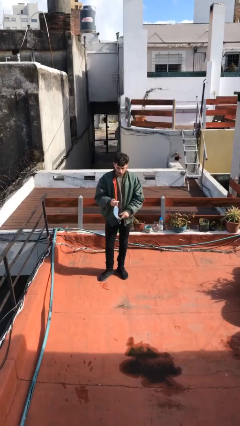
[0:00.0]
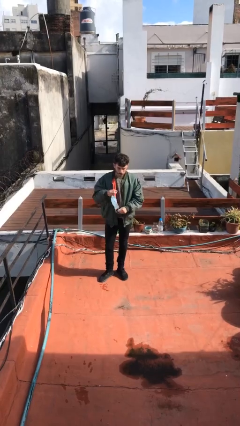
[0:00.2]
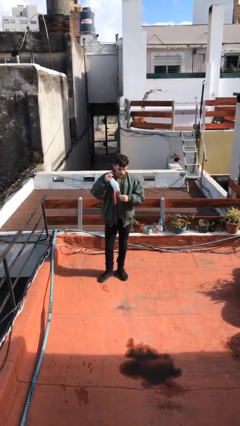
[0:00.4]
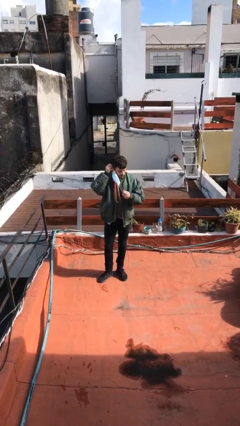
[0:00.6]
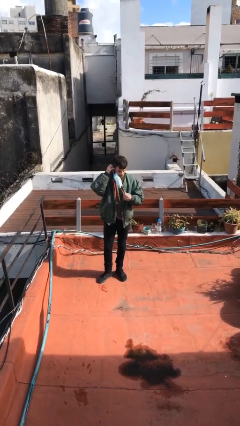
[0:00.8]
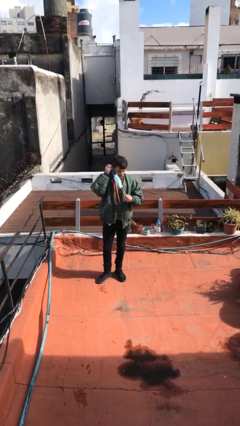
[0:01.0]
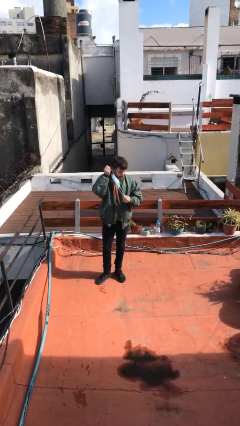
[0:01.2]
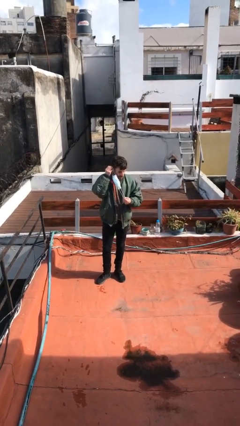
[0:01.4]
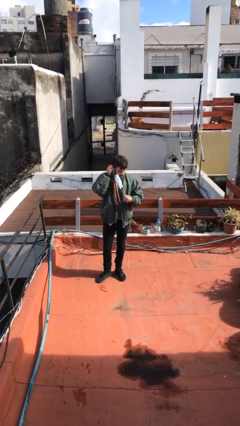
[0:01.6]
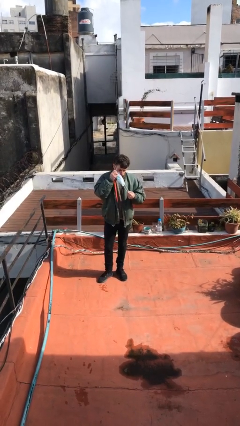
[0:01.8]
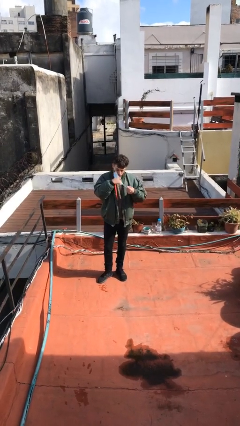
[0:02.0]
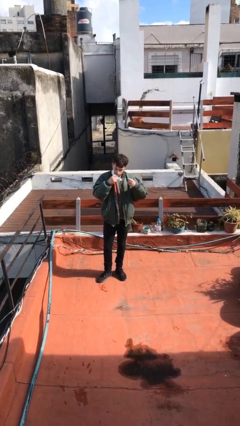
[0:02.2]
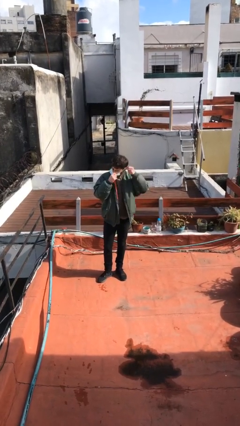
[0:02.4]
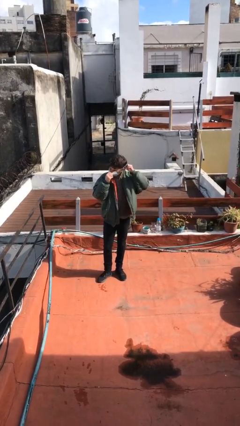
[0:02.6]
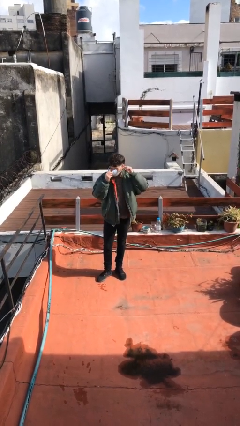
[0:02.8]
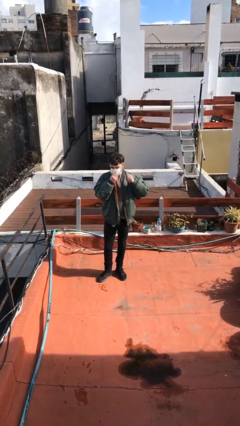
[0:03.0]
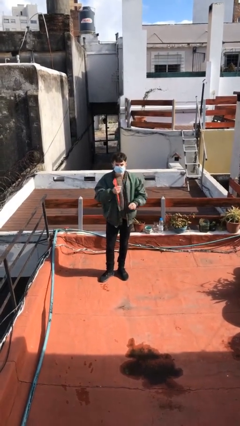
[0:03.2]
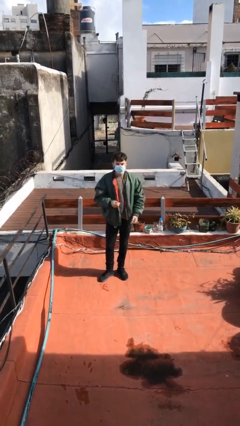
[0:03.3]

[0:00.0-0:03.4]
person puts on facemask

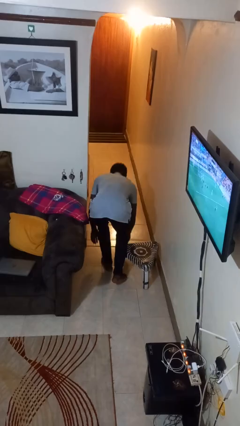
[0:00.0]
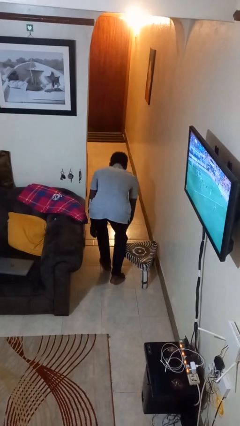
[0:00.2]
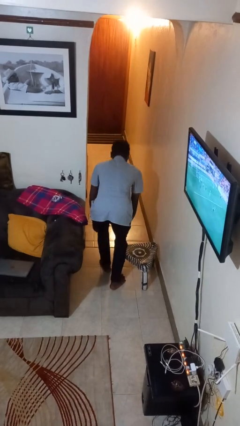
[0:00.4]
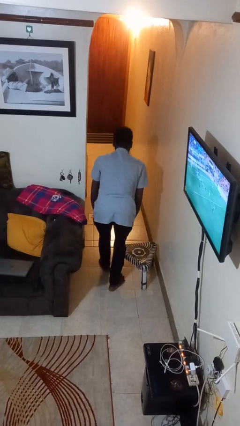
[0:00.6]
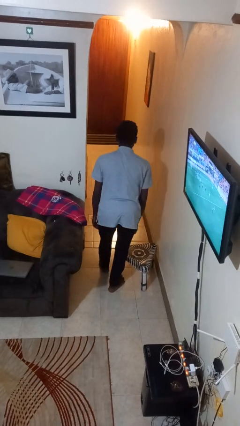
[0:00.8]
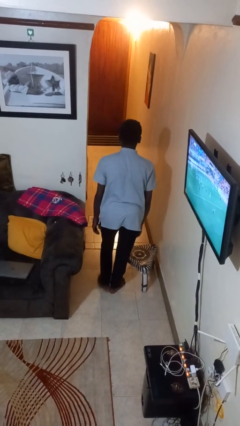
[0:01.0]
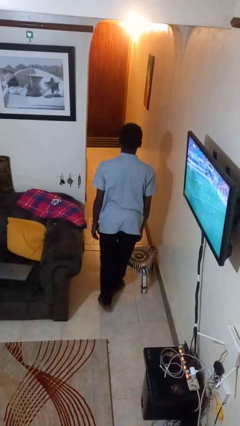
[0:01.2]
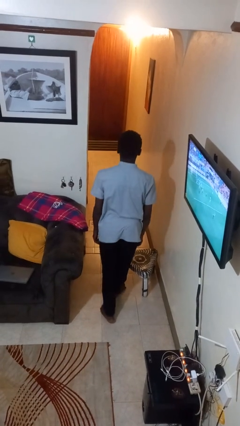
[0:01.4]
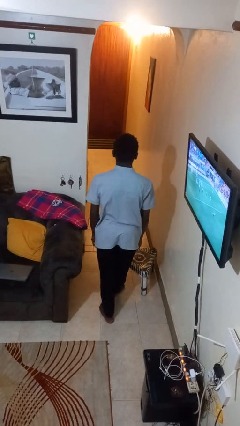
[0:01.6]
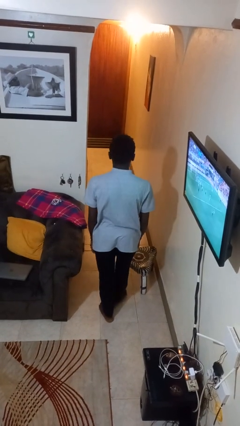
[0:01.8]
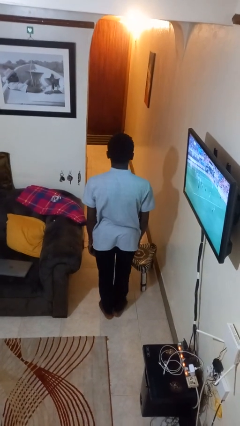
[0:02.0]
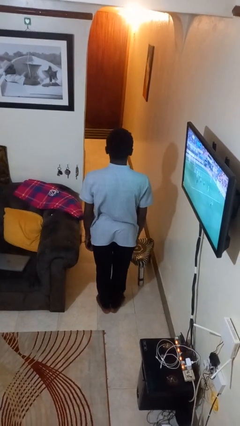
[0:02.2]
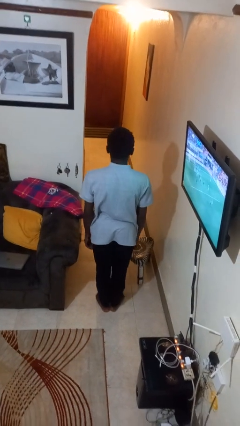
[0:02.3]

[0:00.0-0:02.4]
person stands up from floor

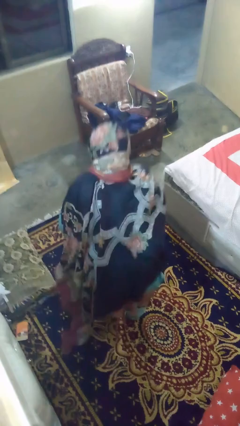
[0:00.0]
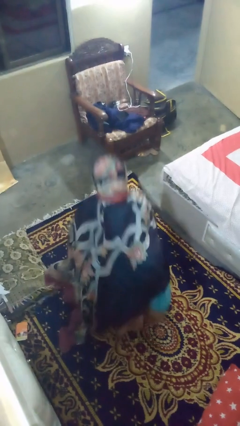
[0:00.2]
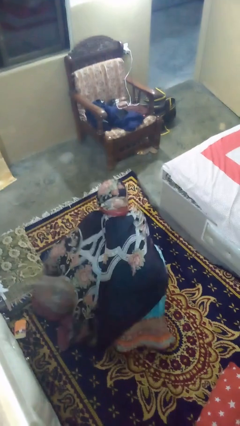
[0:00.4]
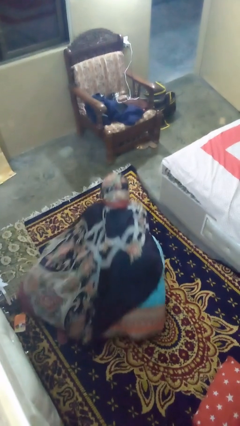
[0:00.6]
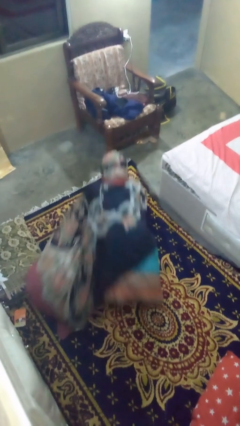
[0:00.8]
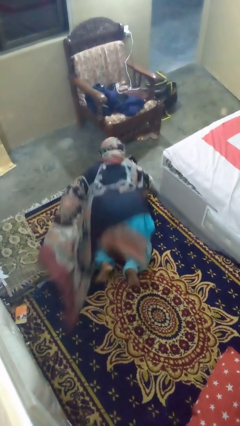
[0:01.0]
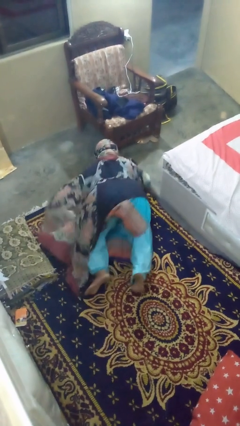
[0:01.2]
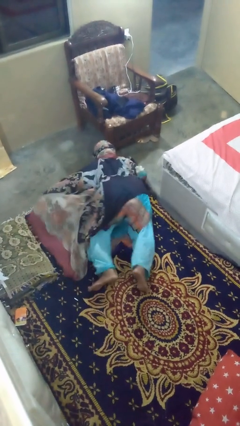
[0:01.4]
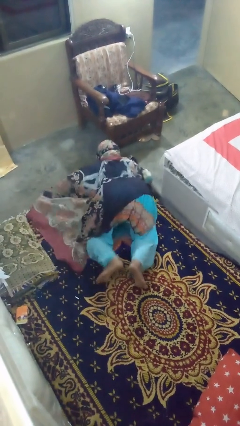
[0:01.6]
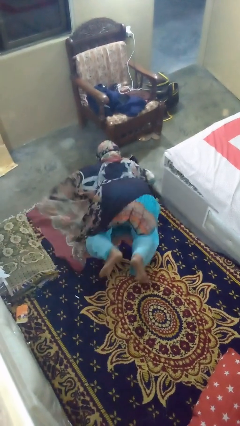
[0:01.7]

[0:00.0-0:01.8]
person exercises with pushup

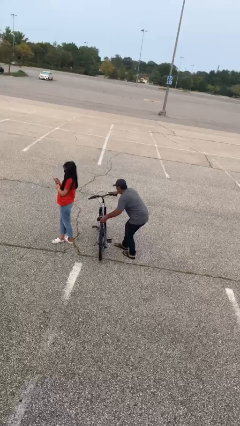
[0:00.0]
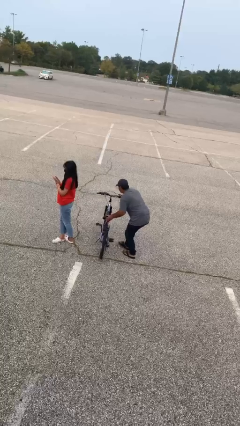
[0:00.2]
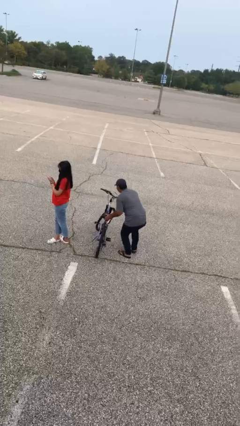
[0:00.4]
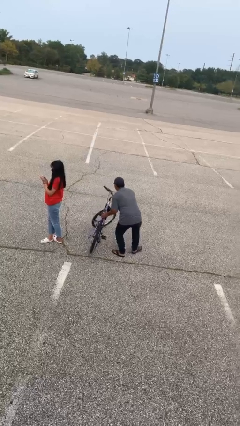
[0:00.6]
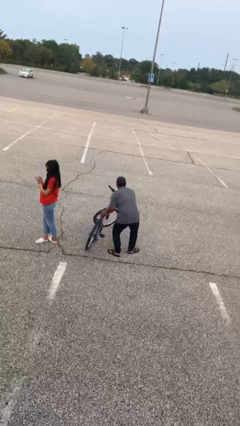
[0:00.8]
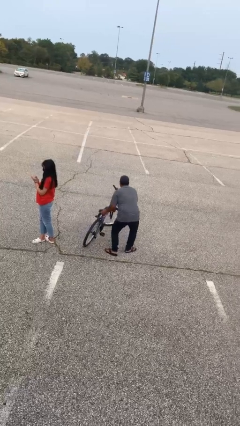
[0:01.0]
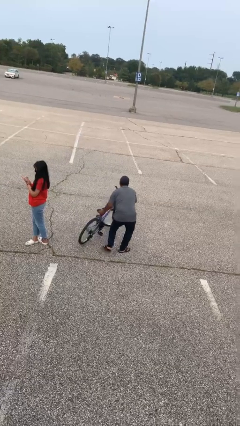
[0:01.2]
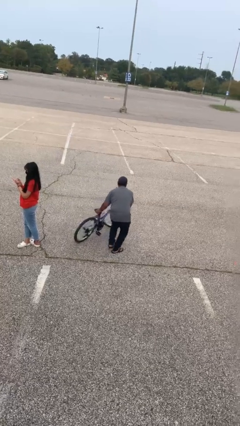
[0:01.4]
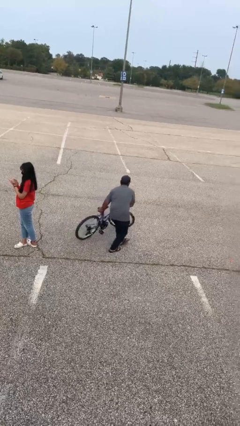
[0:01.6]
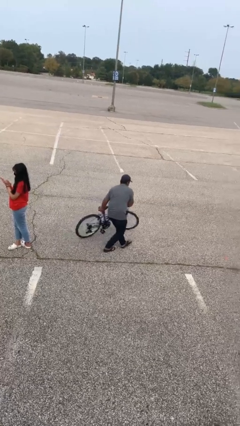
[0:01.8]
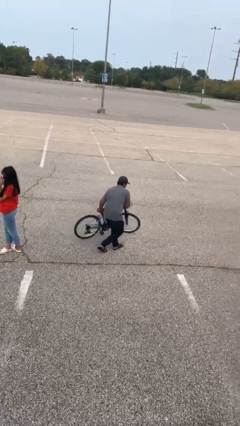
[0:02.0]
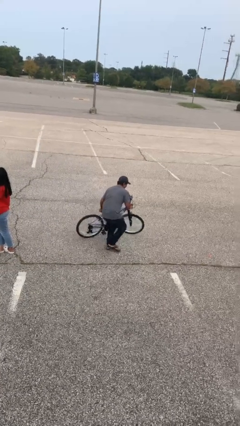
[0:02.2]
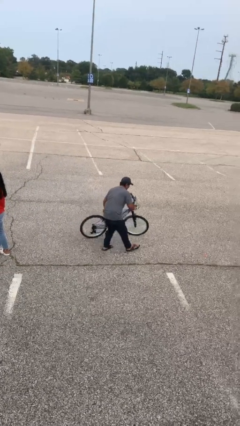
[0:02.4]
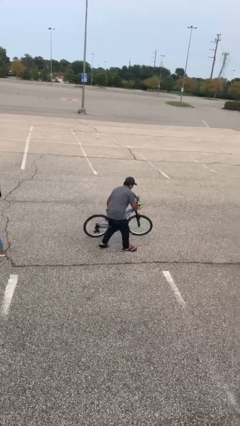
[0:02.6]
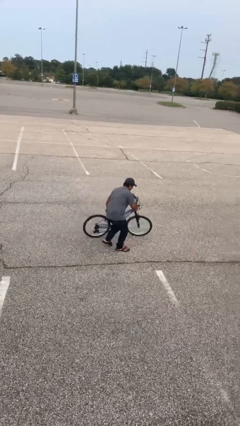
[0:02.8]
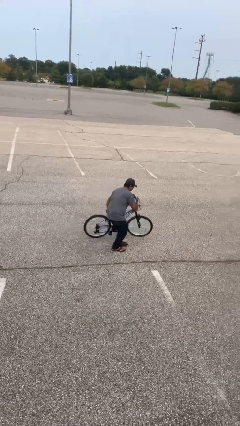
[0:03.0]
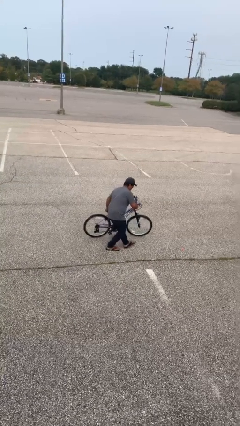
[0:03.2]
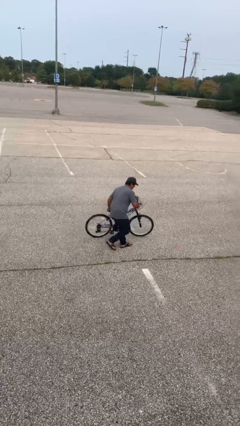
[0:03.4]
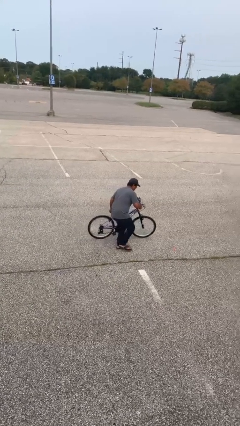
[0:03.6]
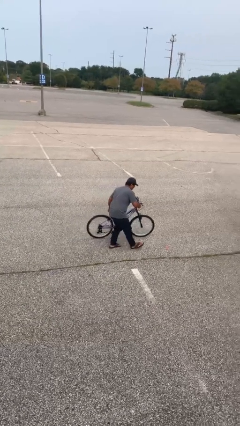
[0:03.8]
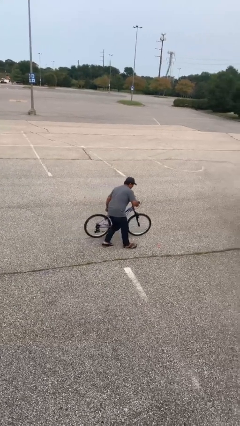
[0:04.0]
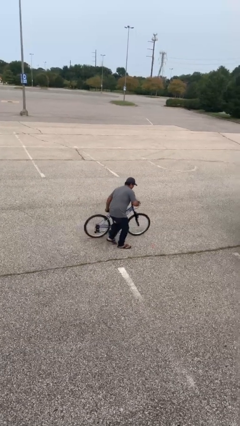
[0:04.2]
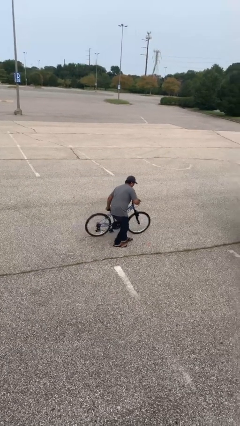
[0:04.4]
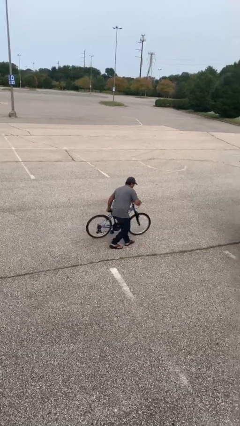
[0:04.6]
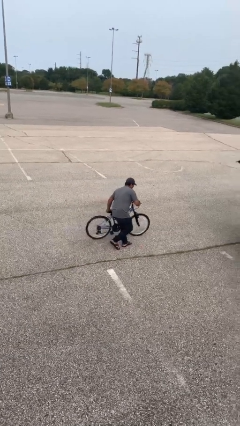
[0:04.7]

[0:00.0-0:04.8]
person steals object from person

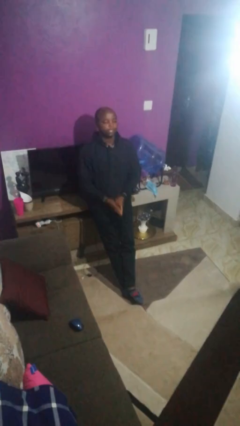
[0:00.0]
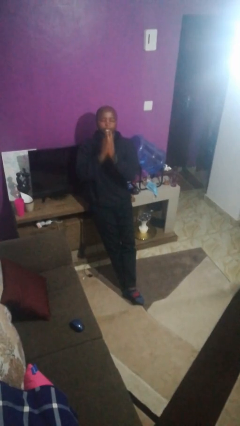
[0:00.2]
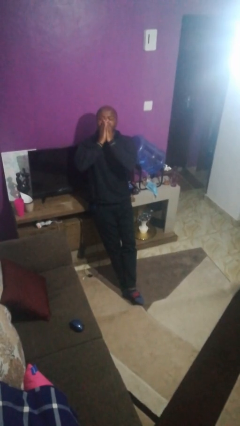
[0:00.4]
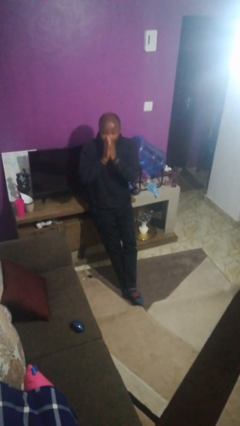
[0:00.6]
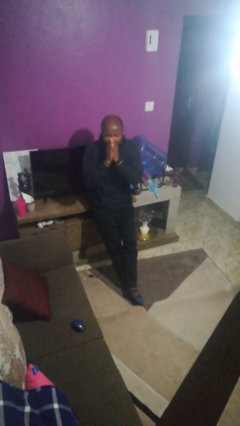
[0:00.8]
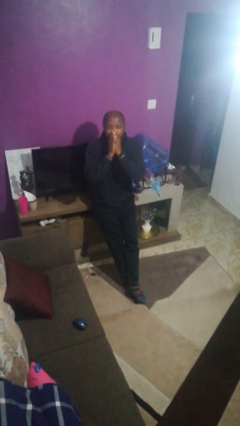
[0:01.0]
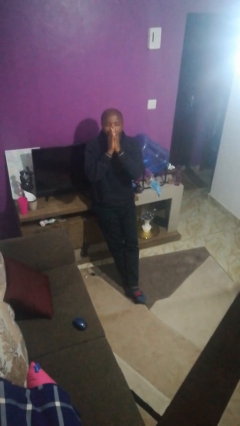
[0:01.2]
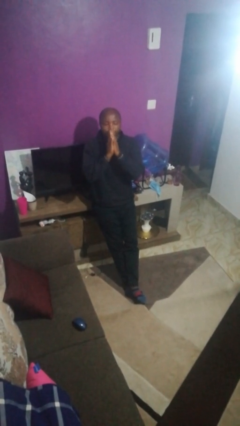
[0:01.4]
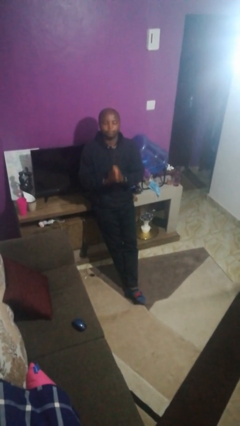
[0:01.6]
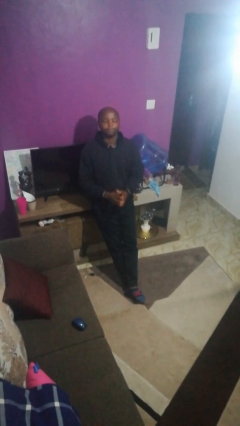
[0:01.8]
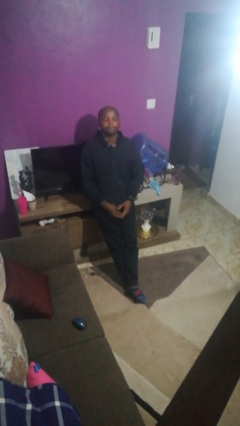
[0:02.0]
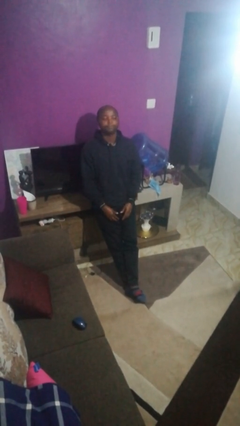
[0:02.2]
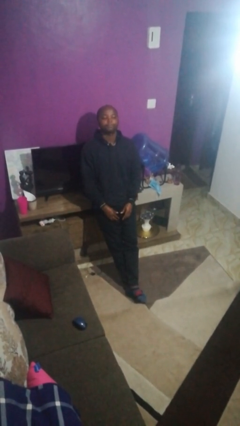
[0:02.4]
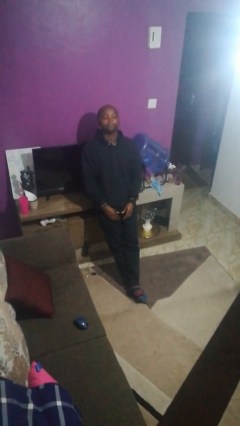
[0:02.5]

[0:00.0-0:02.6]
person sneezes into hand

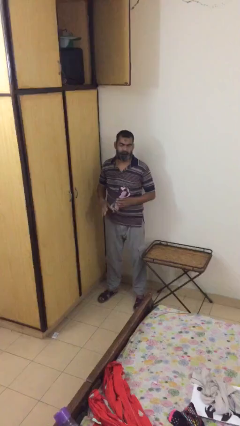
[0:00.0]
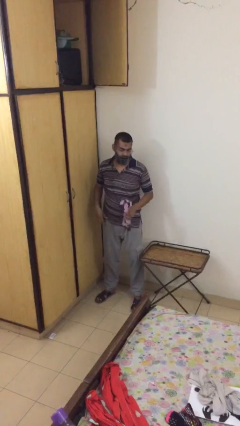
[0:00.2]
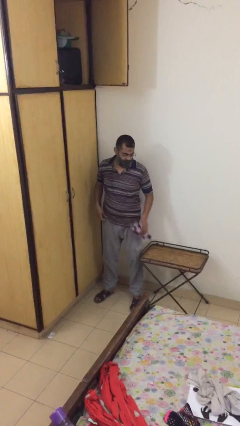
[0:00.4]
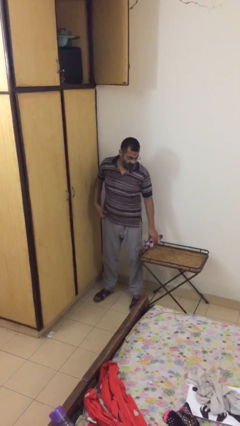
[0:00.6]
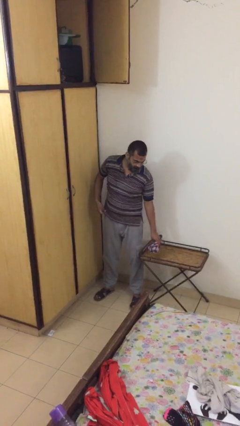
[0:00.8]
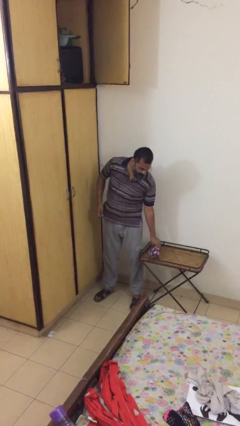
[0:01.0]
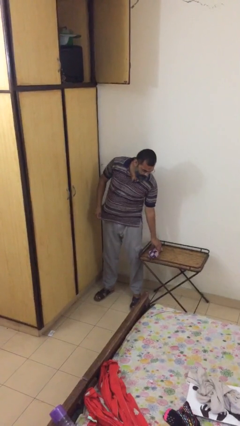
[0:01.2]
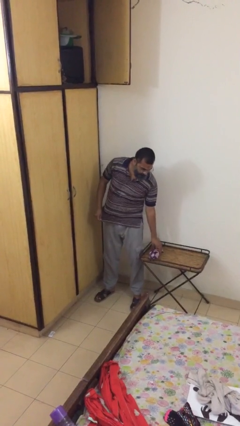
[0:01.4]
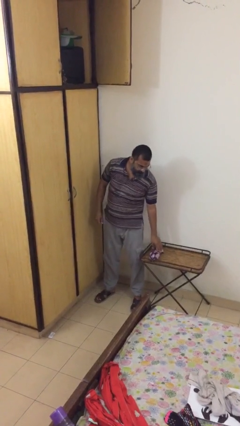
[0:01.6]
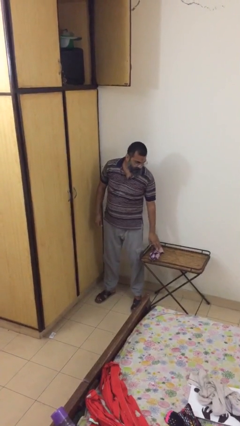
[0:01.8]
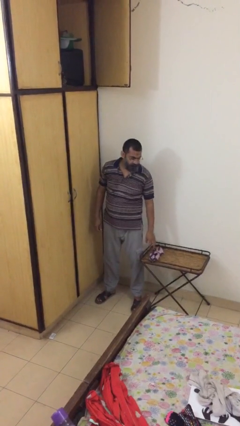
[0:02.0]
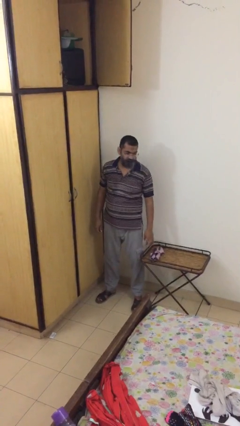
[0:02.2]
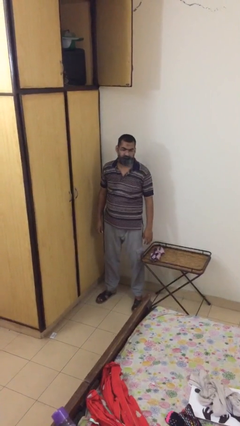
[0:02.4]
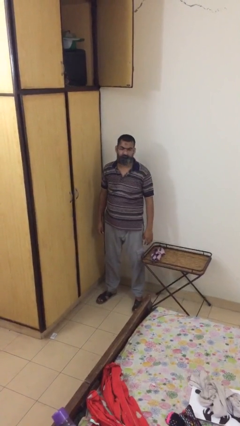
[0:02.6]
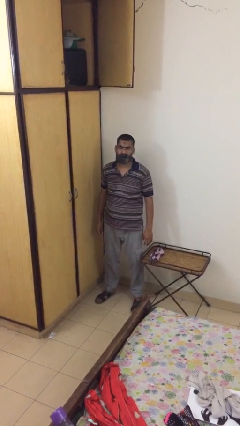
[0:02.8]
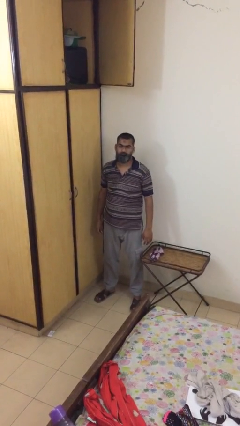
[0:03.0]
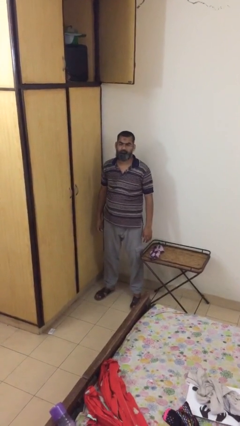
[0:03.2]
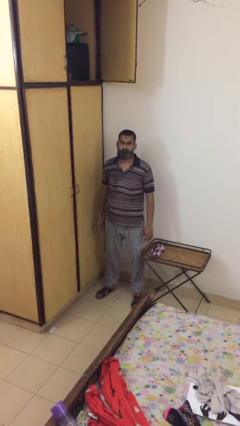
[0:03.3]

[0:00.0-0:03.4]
person puts down object on table
